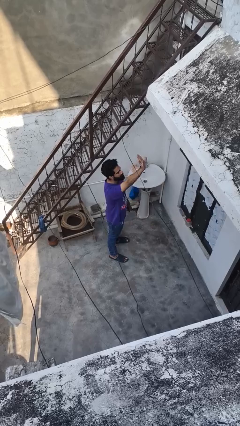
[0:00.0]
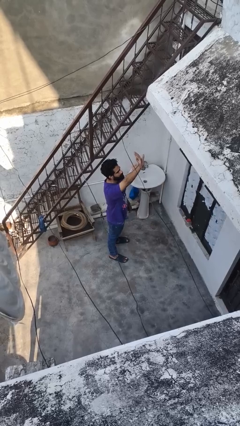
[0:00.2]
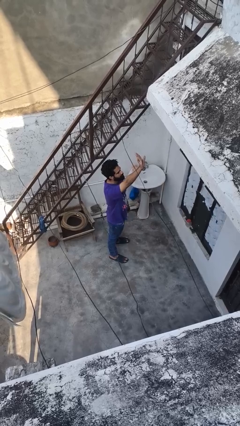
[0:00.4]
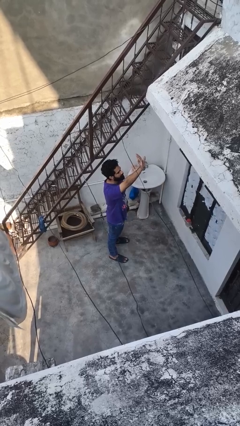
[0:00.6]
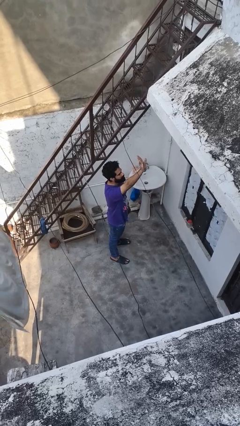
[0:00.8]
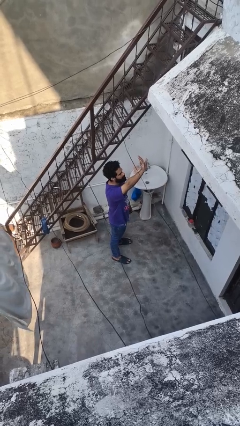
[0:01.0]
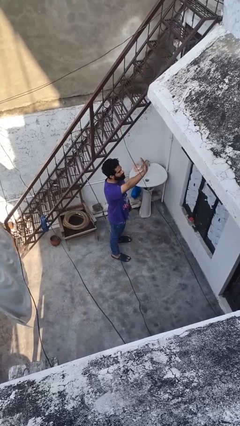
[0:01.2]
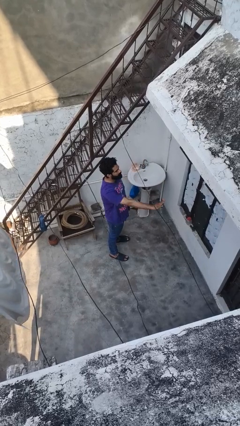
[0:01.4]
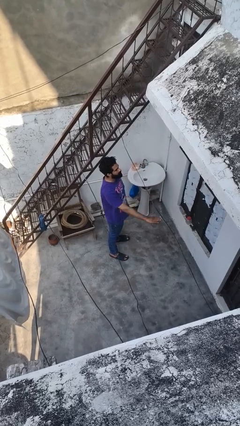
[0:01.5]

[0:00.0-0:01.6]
person gestures raise hand

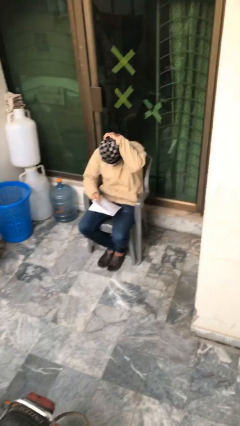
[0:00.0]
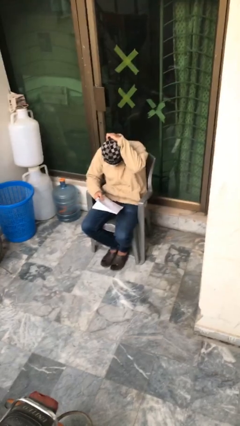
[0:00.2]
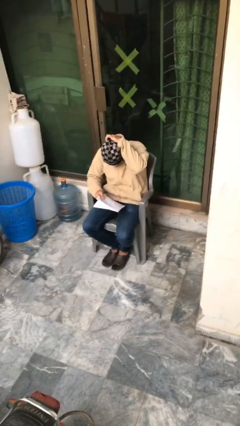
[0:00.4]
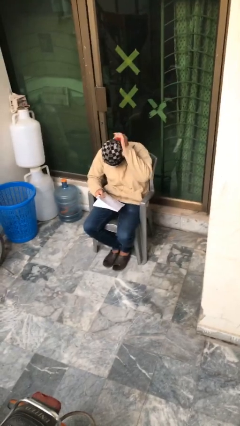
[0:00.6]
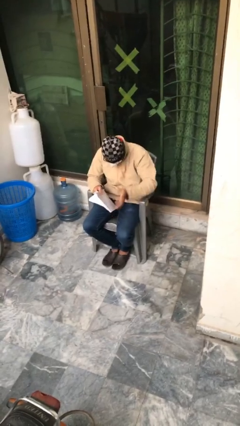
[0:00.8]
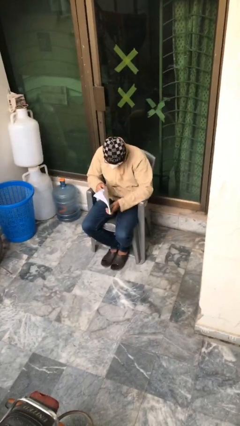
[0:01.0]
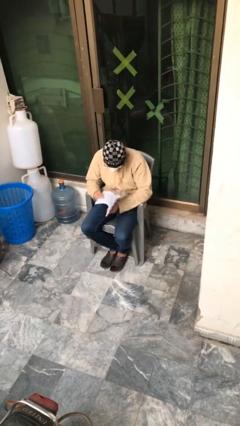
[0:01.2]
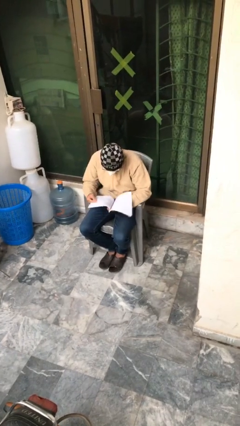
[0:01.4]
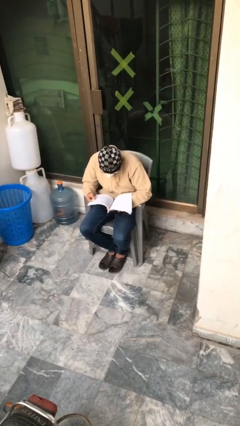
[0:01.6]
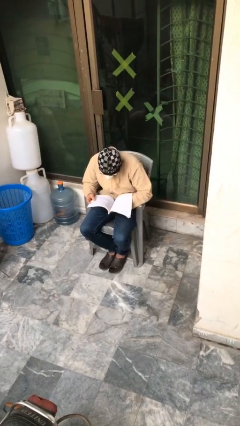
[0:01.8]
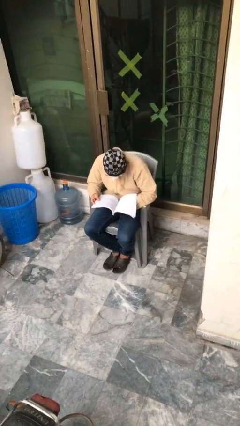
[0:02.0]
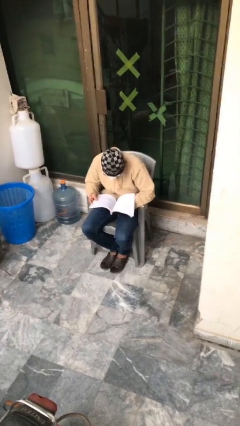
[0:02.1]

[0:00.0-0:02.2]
person reads document

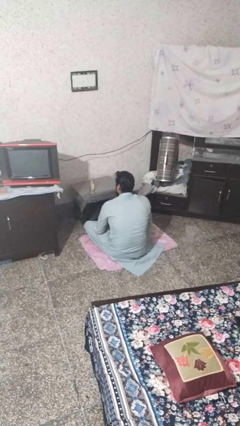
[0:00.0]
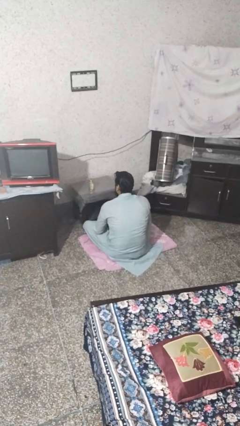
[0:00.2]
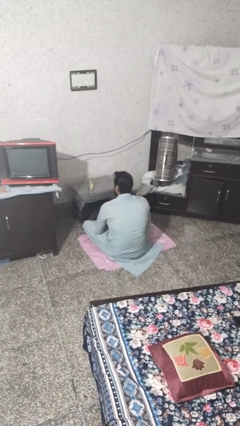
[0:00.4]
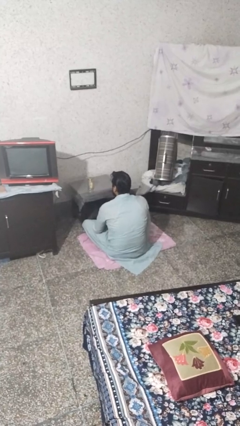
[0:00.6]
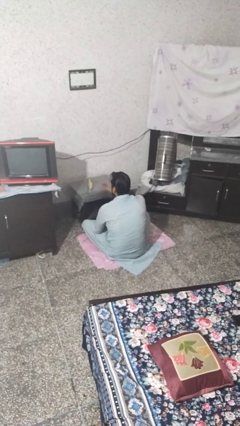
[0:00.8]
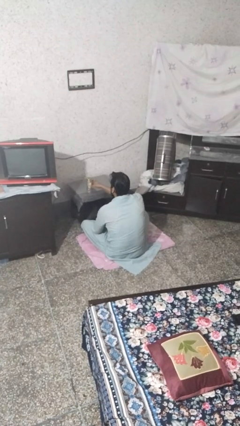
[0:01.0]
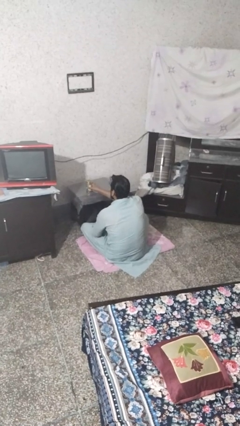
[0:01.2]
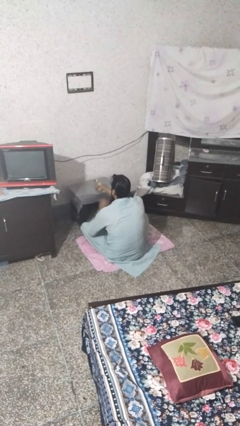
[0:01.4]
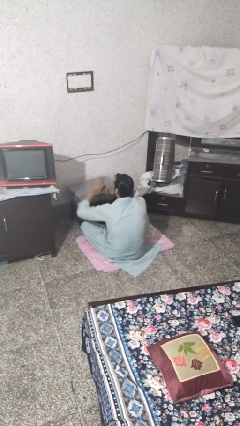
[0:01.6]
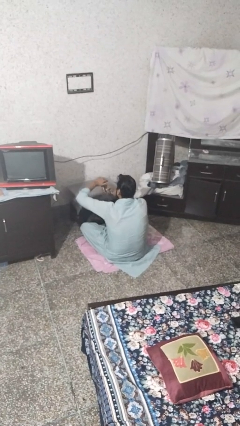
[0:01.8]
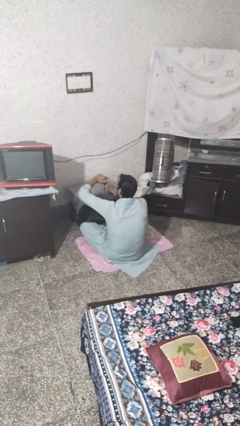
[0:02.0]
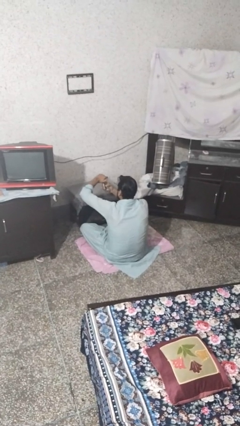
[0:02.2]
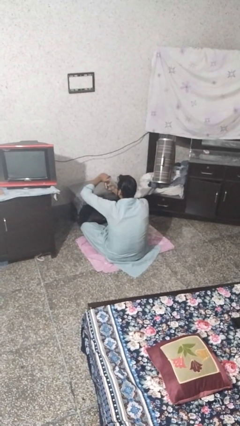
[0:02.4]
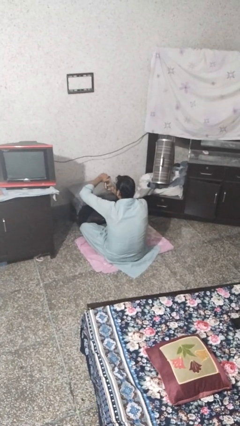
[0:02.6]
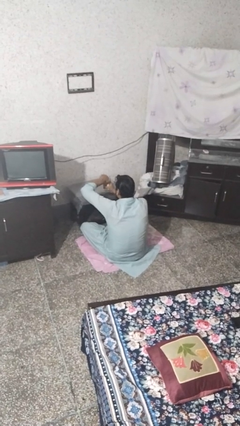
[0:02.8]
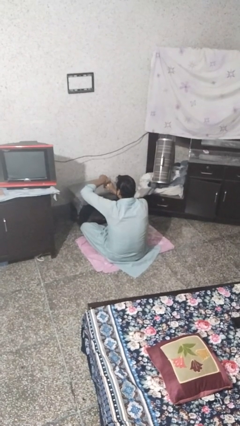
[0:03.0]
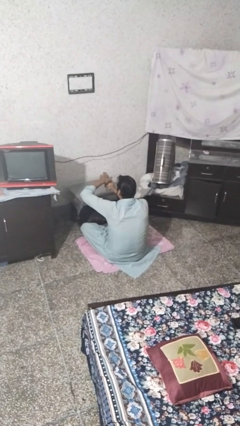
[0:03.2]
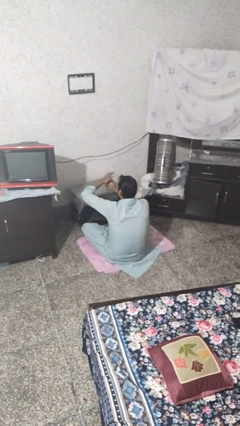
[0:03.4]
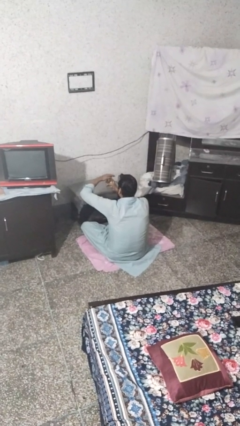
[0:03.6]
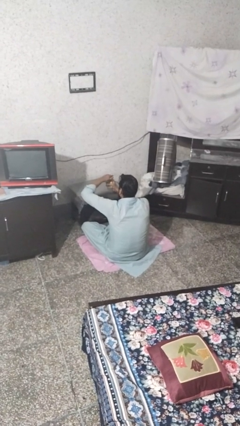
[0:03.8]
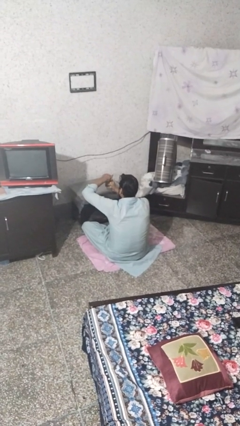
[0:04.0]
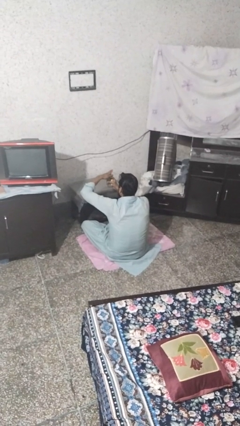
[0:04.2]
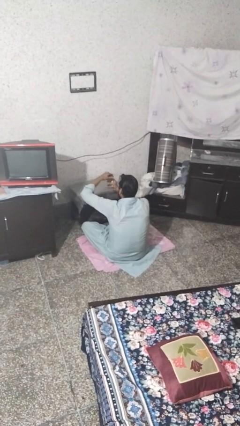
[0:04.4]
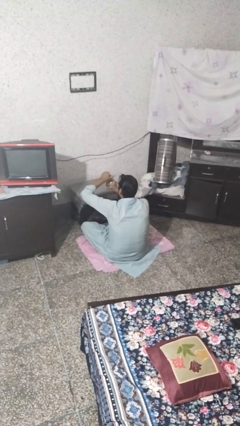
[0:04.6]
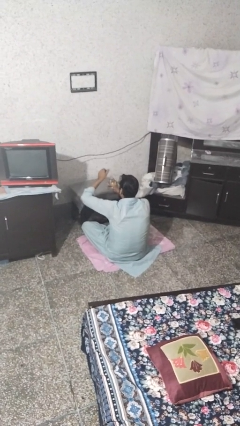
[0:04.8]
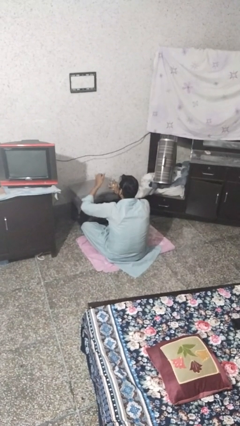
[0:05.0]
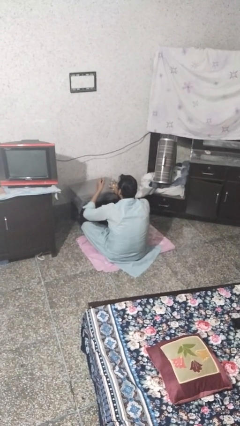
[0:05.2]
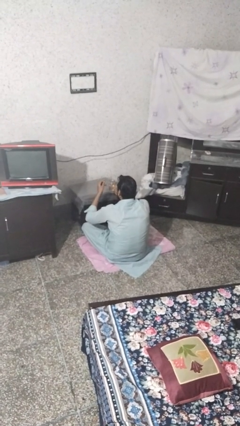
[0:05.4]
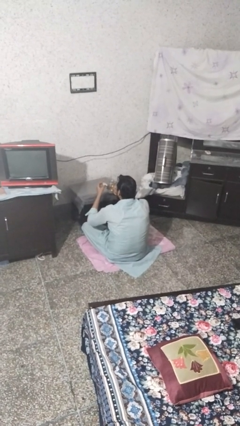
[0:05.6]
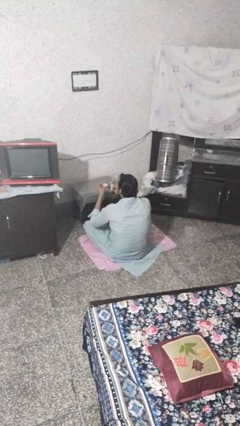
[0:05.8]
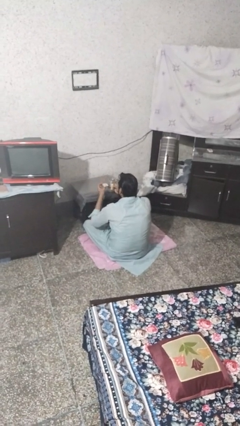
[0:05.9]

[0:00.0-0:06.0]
person opens jar

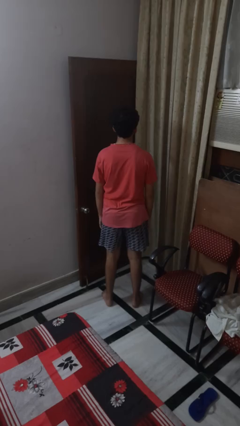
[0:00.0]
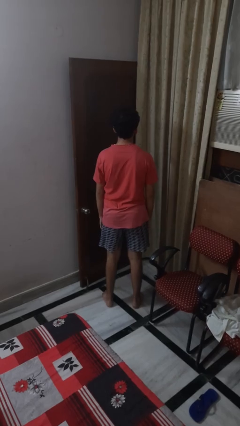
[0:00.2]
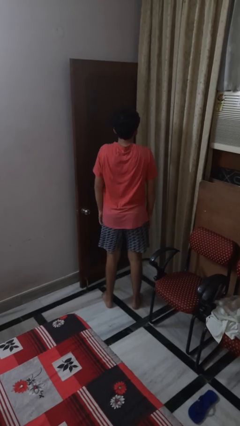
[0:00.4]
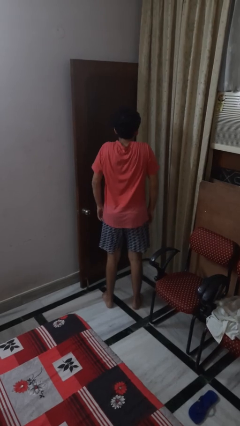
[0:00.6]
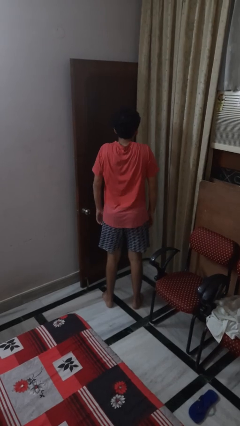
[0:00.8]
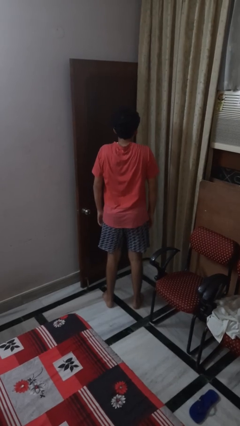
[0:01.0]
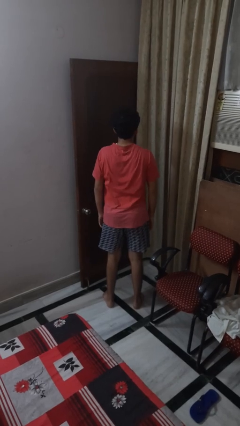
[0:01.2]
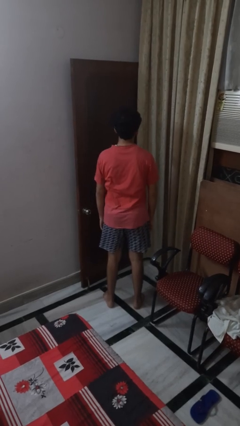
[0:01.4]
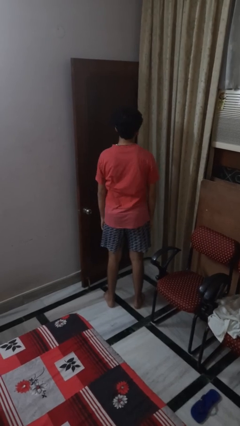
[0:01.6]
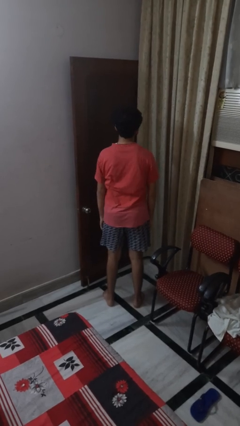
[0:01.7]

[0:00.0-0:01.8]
person shrugs

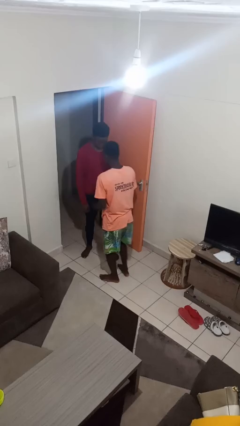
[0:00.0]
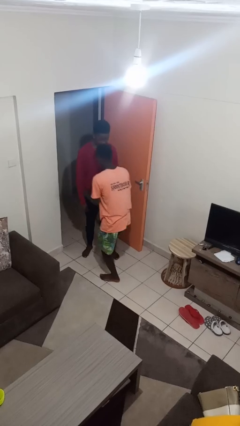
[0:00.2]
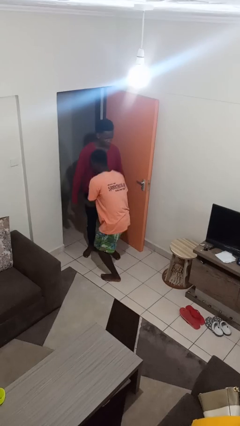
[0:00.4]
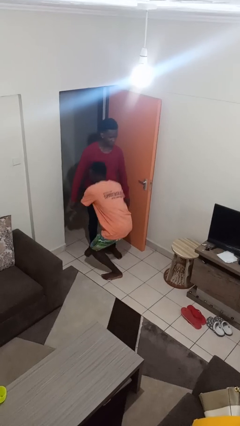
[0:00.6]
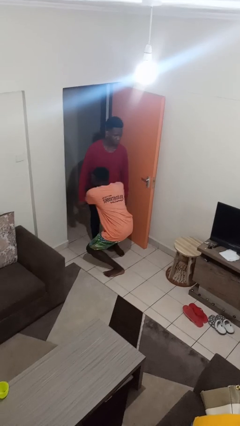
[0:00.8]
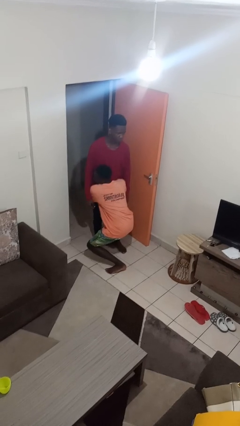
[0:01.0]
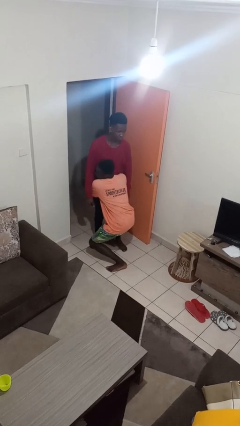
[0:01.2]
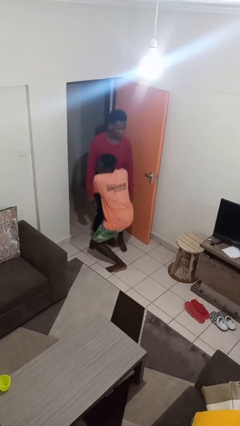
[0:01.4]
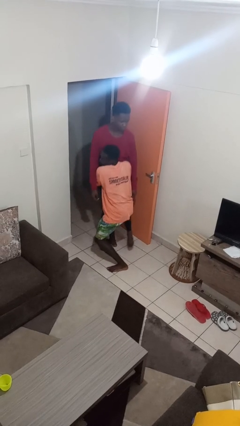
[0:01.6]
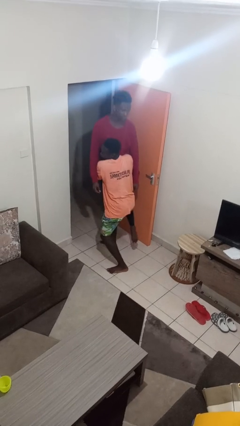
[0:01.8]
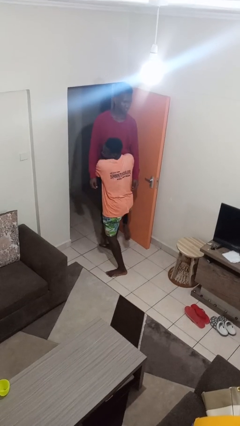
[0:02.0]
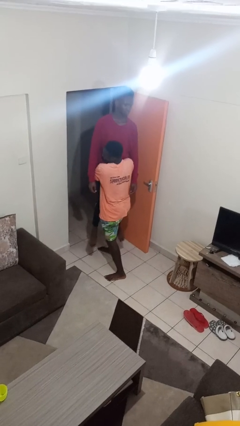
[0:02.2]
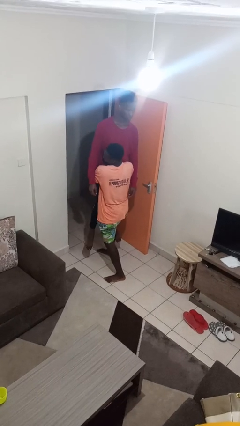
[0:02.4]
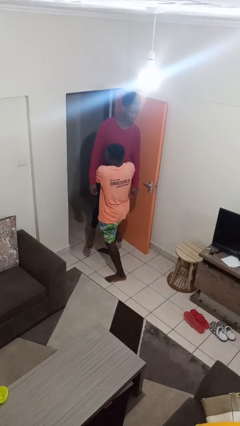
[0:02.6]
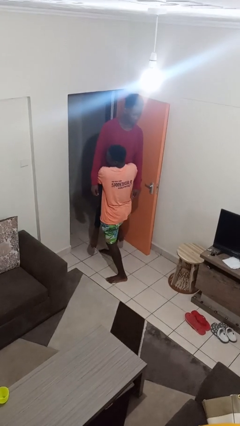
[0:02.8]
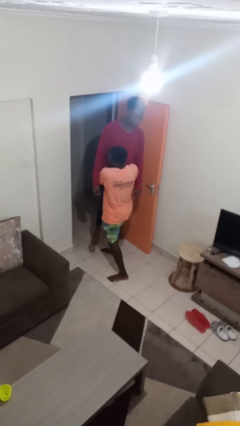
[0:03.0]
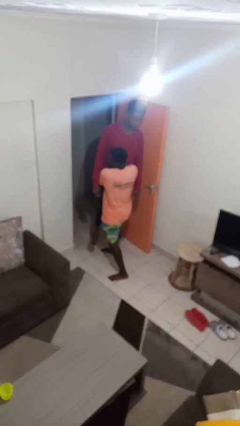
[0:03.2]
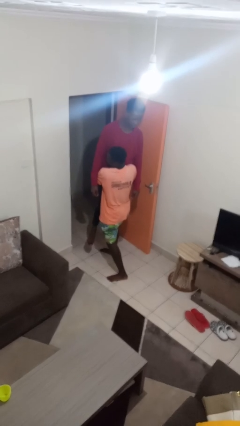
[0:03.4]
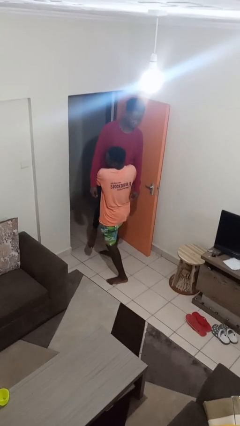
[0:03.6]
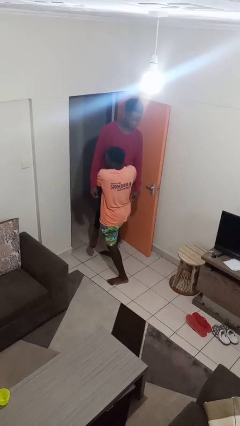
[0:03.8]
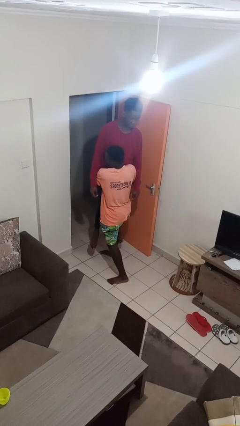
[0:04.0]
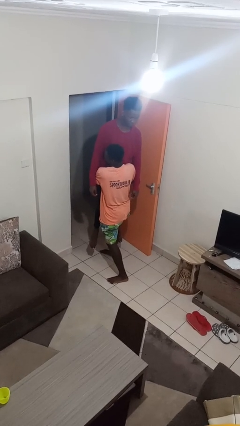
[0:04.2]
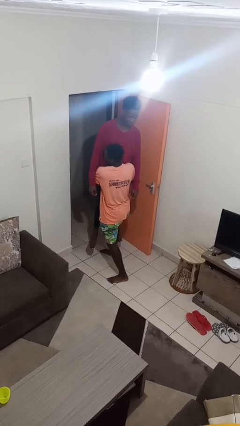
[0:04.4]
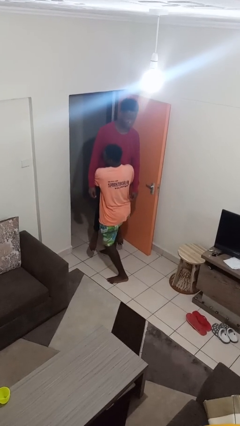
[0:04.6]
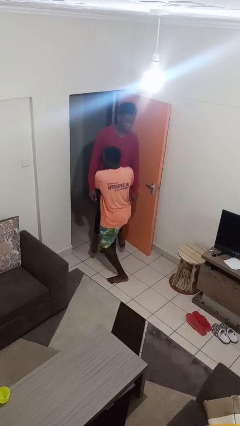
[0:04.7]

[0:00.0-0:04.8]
person picks up person

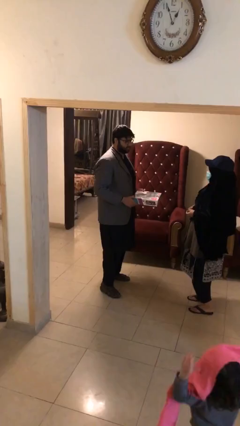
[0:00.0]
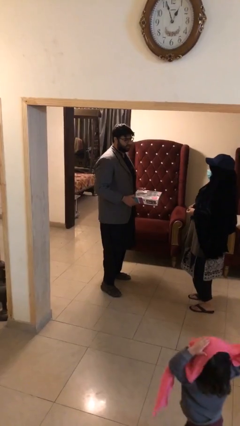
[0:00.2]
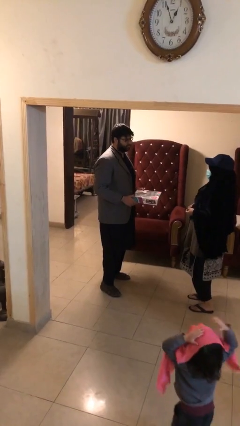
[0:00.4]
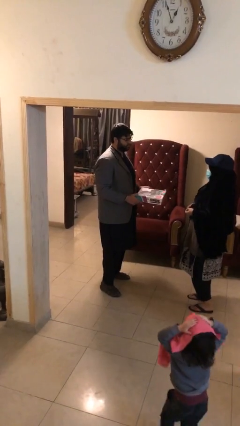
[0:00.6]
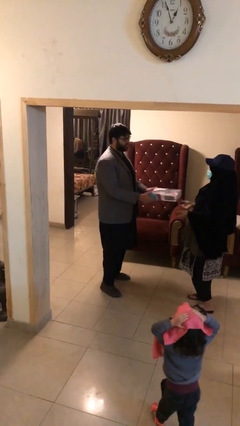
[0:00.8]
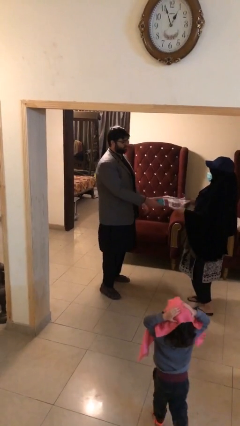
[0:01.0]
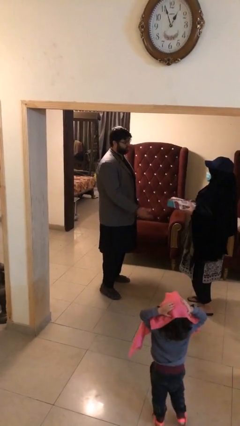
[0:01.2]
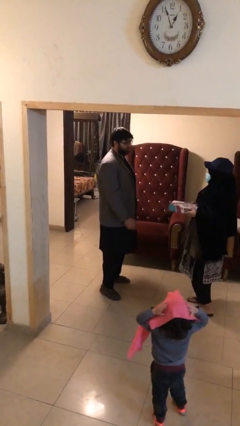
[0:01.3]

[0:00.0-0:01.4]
person transfers object to person
